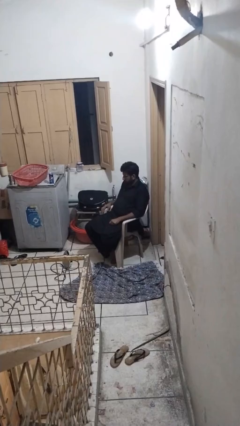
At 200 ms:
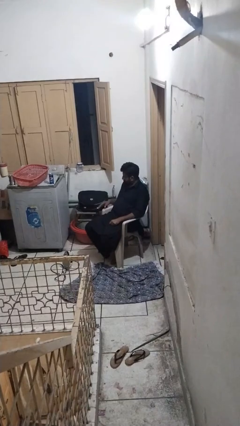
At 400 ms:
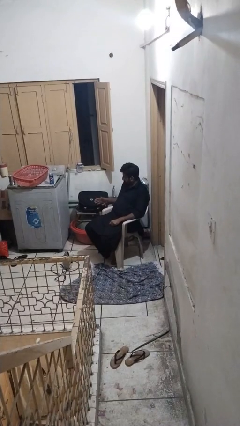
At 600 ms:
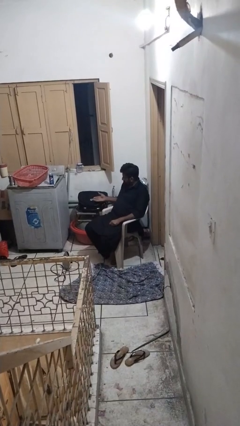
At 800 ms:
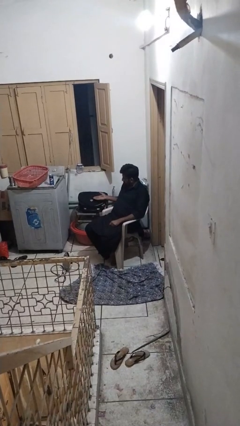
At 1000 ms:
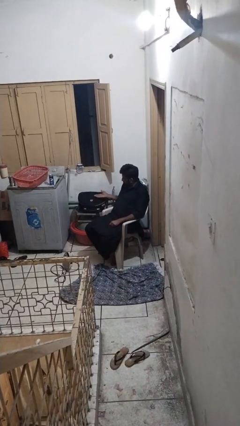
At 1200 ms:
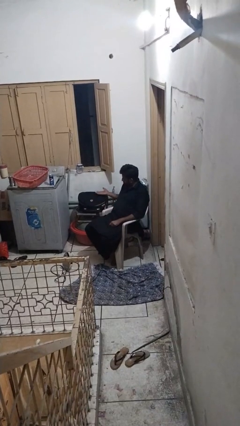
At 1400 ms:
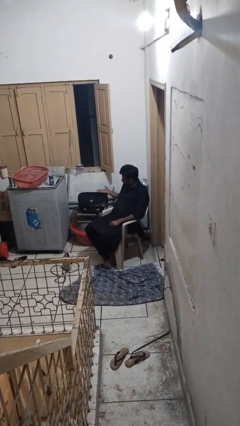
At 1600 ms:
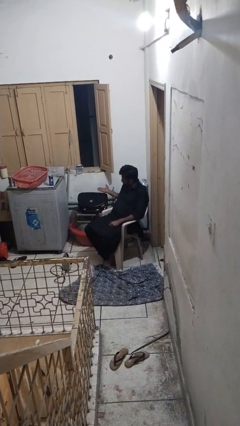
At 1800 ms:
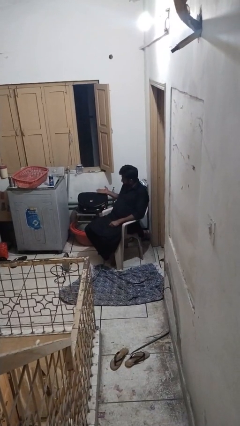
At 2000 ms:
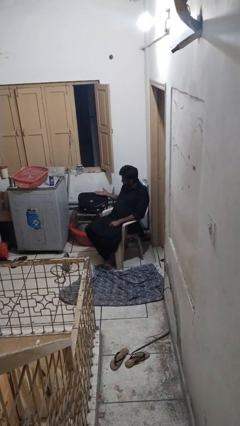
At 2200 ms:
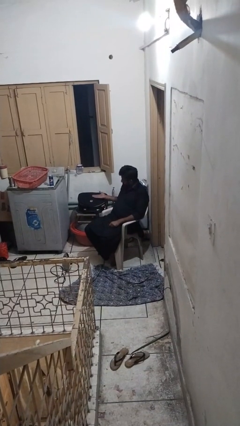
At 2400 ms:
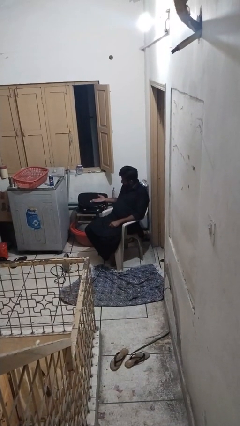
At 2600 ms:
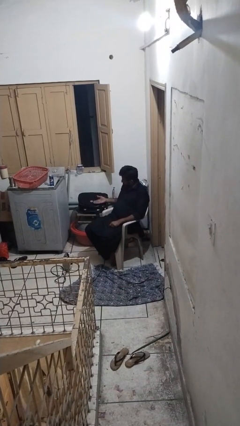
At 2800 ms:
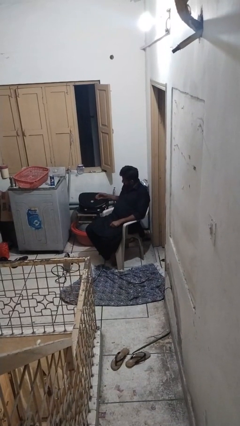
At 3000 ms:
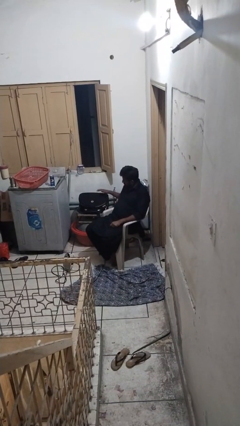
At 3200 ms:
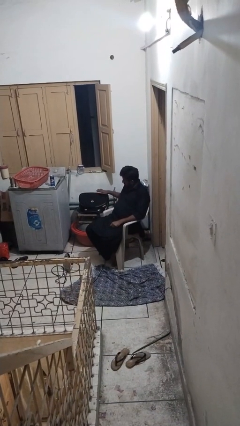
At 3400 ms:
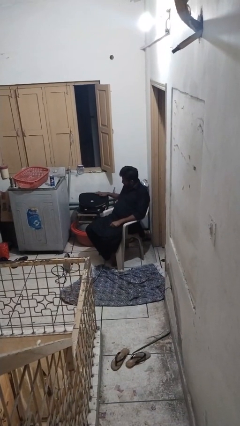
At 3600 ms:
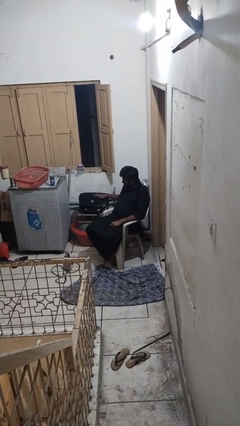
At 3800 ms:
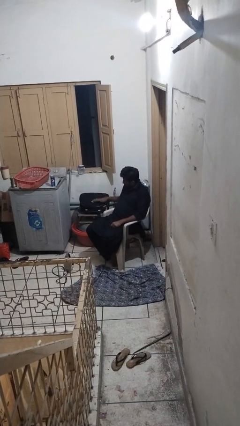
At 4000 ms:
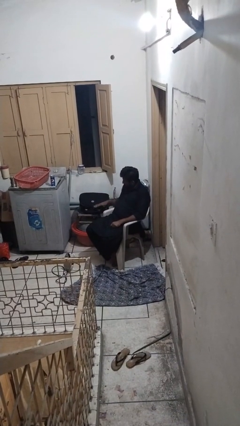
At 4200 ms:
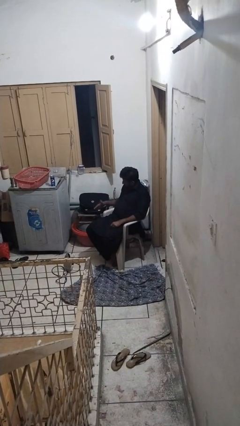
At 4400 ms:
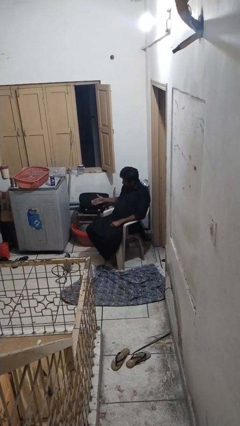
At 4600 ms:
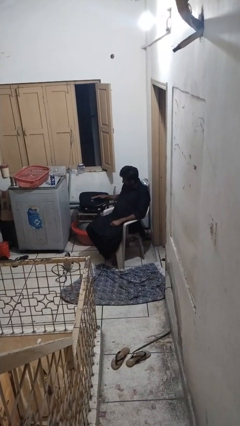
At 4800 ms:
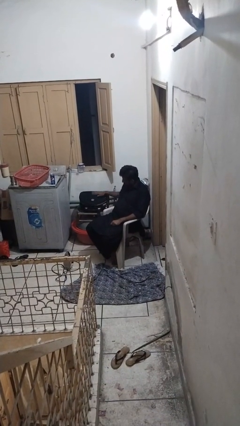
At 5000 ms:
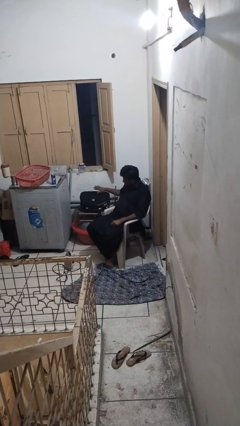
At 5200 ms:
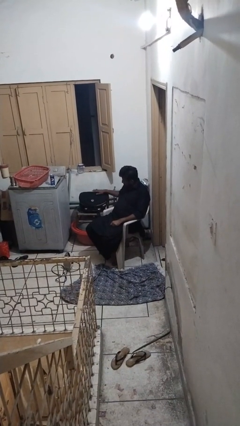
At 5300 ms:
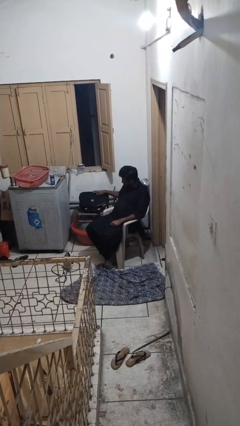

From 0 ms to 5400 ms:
person waves hand over object

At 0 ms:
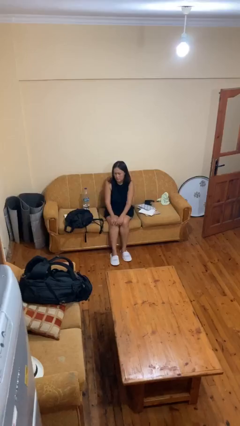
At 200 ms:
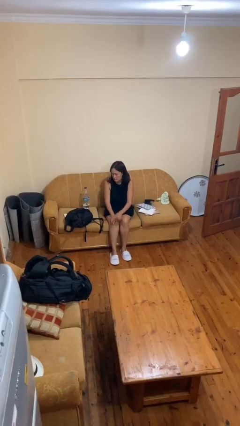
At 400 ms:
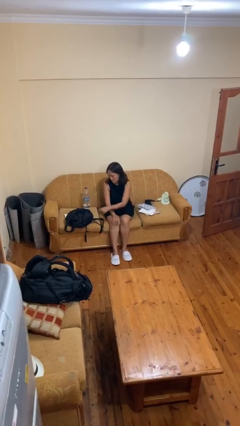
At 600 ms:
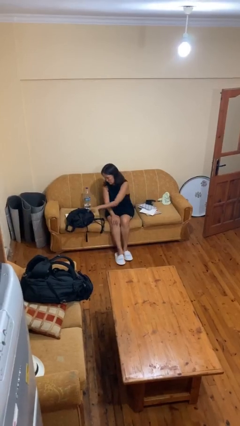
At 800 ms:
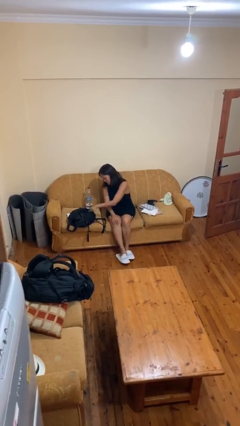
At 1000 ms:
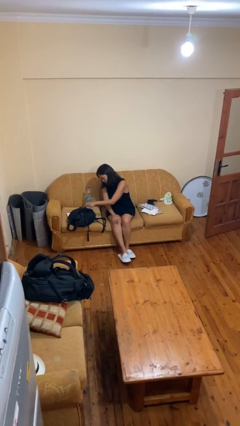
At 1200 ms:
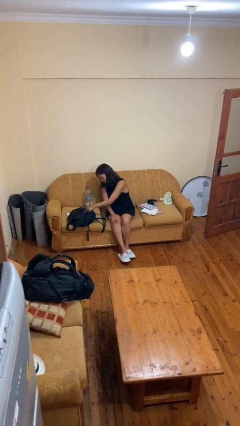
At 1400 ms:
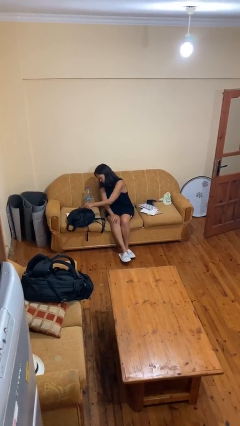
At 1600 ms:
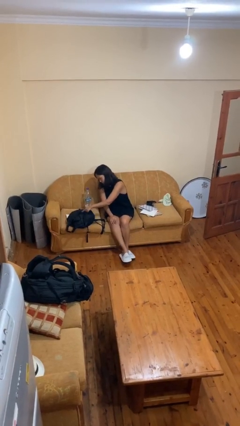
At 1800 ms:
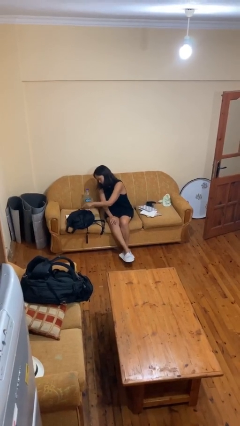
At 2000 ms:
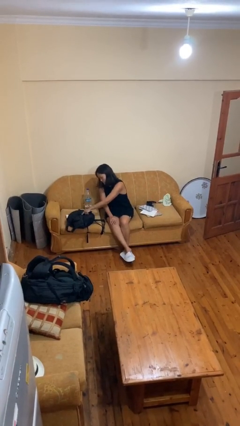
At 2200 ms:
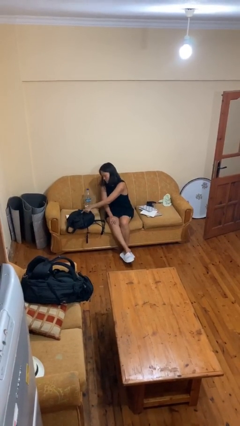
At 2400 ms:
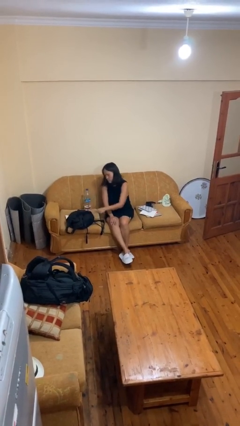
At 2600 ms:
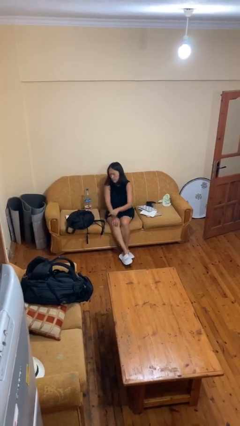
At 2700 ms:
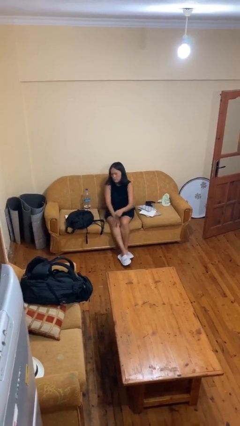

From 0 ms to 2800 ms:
person taps object with finger

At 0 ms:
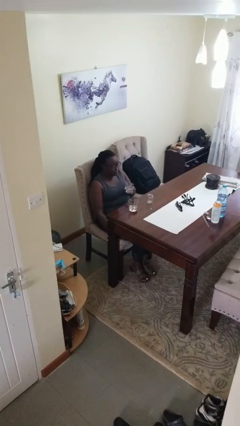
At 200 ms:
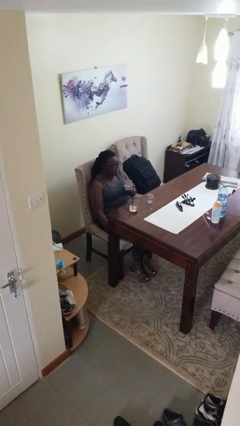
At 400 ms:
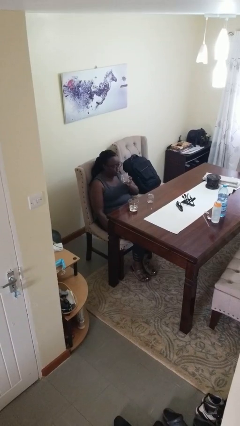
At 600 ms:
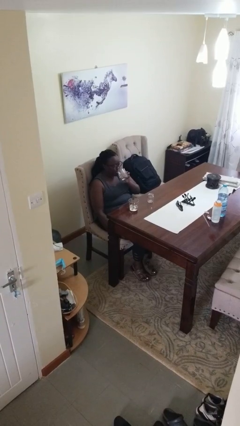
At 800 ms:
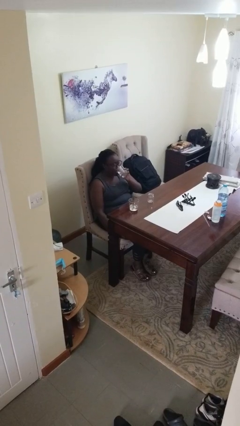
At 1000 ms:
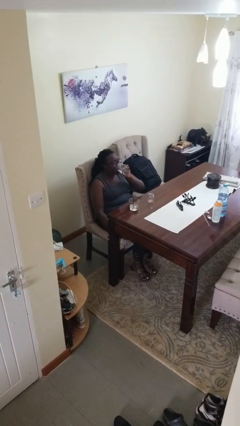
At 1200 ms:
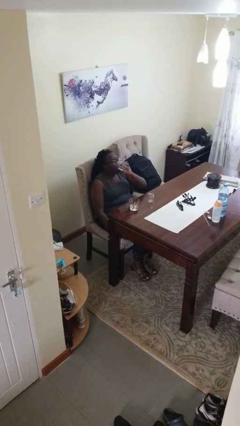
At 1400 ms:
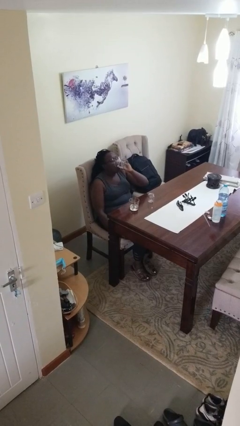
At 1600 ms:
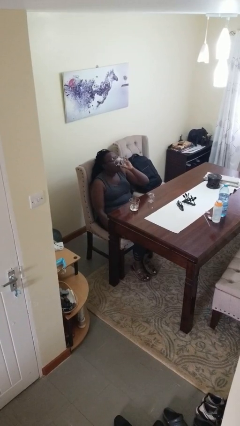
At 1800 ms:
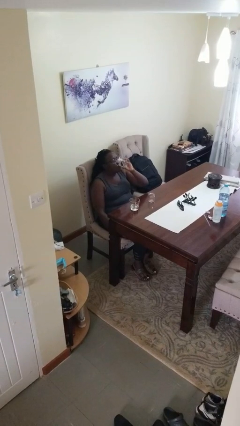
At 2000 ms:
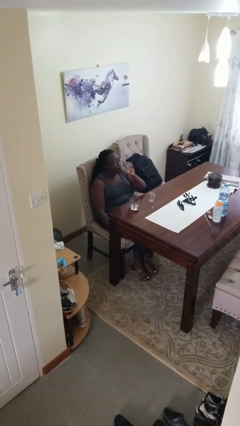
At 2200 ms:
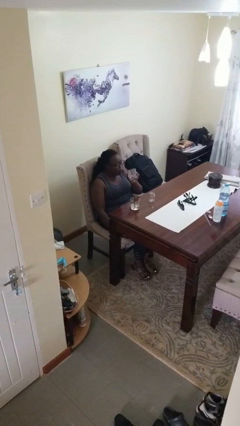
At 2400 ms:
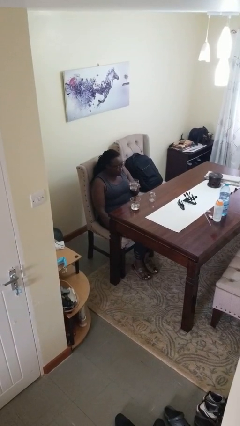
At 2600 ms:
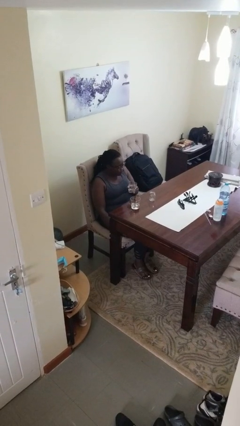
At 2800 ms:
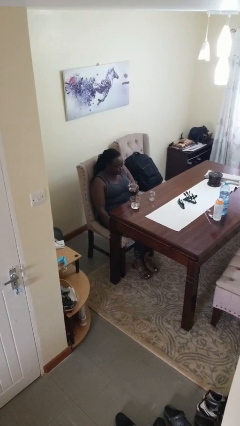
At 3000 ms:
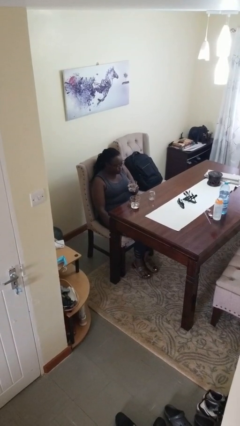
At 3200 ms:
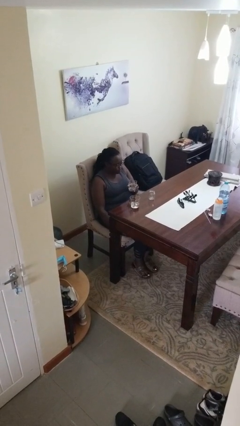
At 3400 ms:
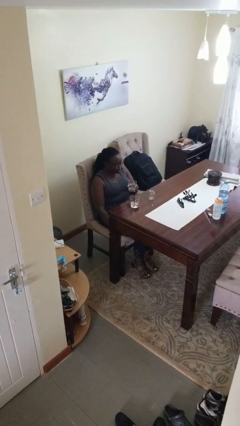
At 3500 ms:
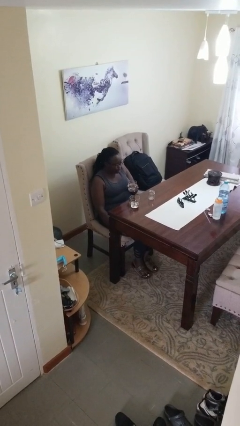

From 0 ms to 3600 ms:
person drinks from shotglass

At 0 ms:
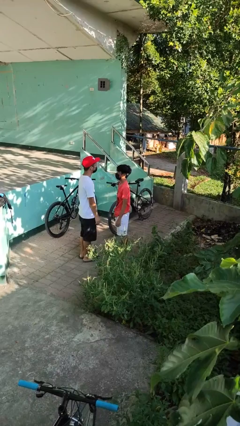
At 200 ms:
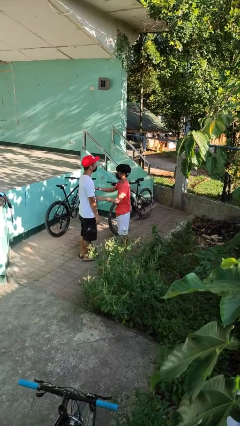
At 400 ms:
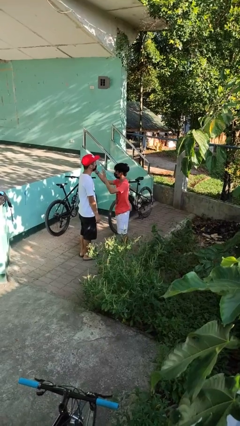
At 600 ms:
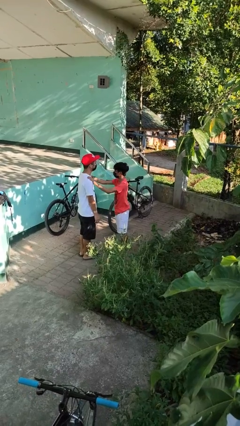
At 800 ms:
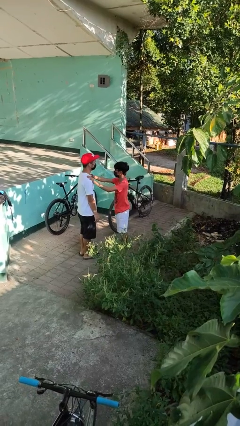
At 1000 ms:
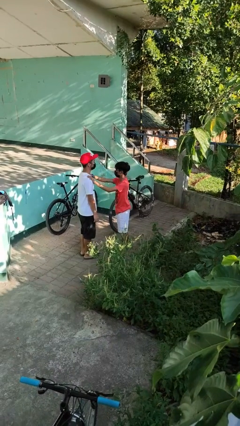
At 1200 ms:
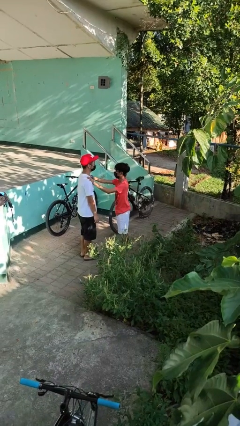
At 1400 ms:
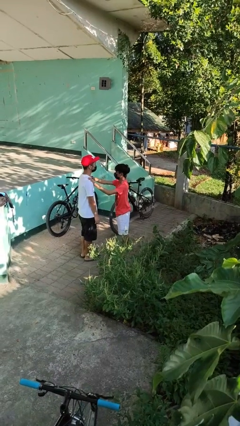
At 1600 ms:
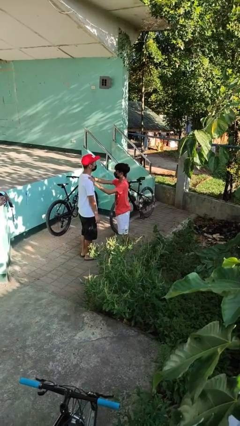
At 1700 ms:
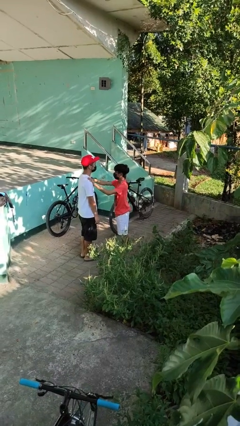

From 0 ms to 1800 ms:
person grabs person by shoulder

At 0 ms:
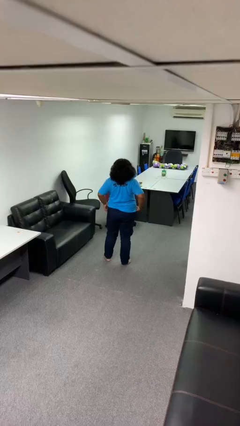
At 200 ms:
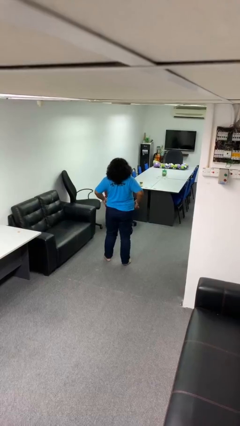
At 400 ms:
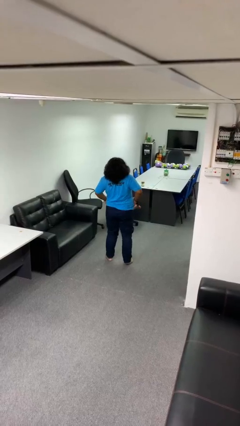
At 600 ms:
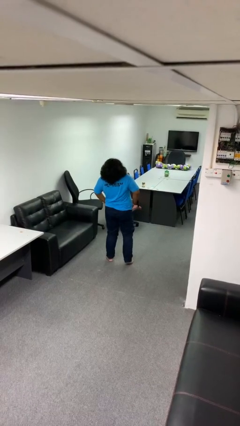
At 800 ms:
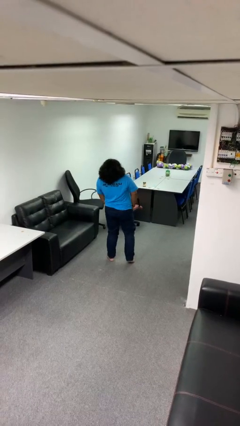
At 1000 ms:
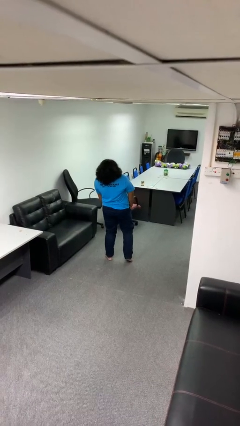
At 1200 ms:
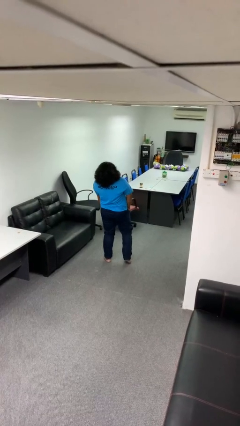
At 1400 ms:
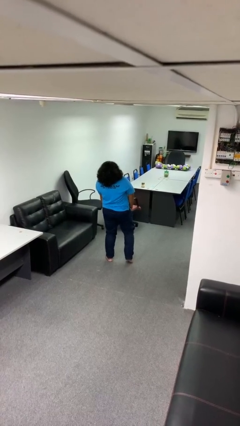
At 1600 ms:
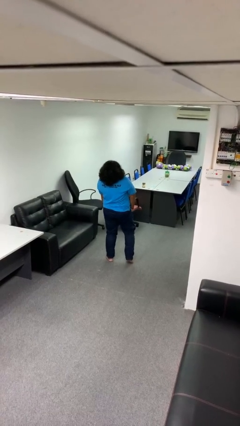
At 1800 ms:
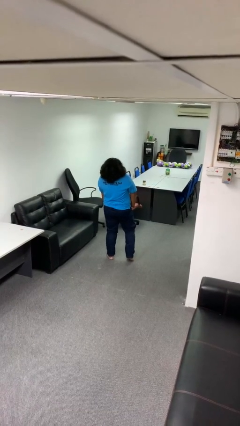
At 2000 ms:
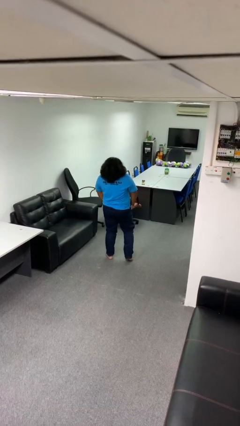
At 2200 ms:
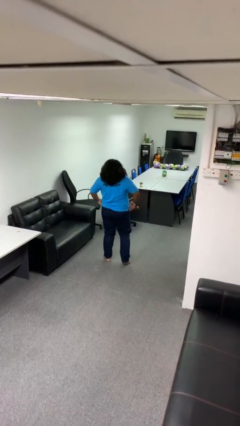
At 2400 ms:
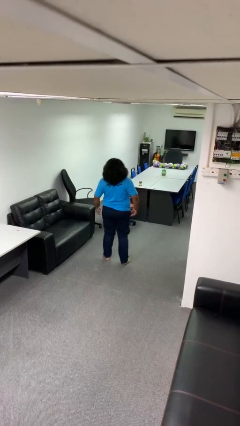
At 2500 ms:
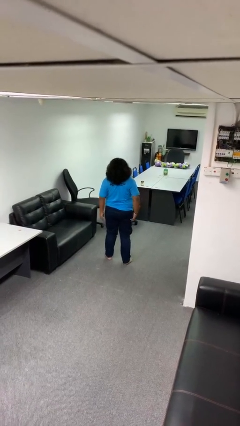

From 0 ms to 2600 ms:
person puts hands in back pockets

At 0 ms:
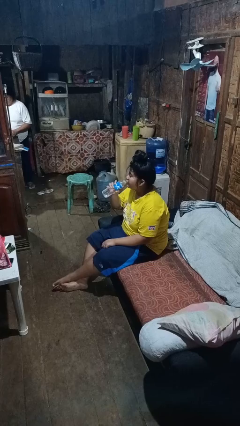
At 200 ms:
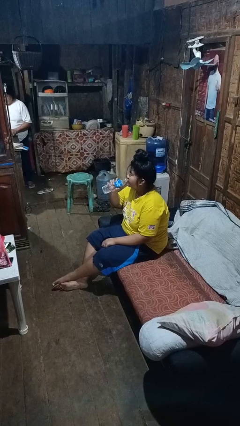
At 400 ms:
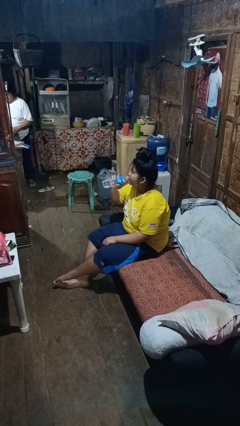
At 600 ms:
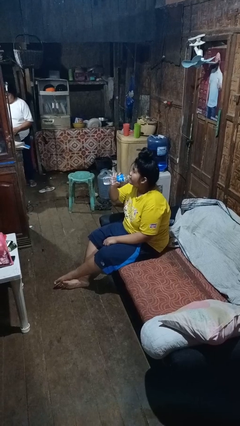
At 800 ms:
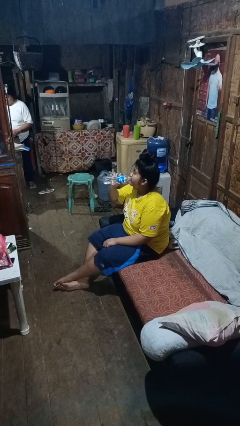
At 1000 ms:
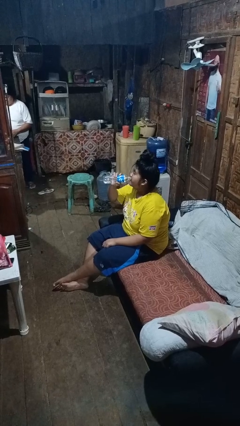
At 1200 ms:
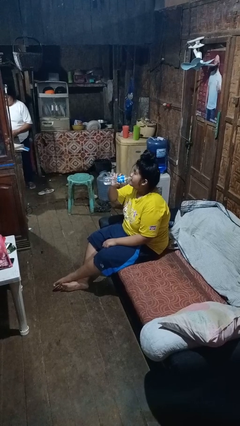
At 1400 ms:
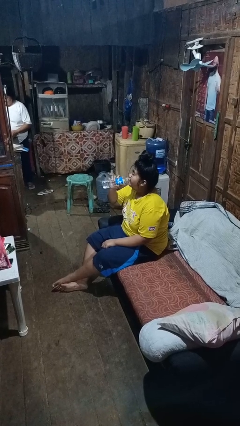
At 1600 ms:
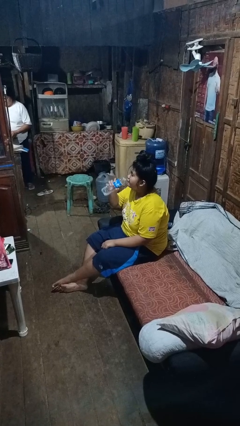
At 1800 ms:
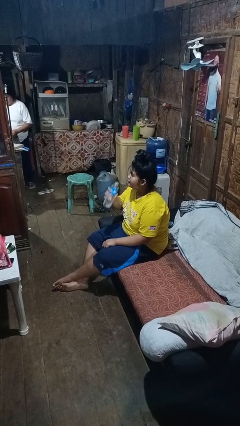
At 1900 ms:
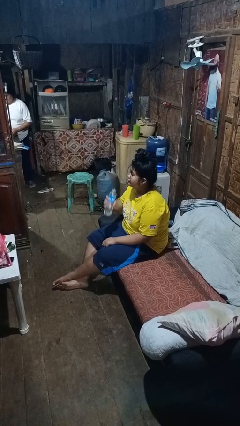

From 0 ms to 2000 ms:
person drinks from bottle
